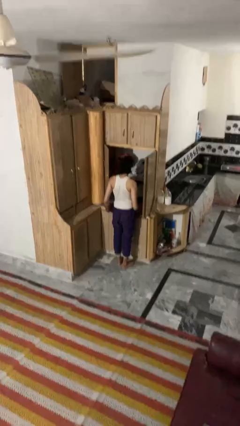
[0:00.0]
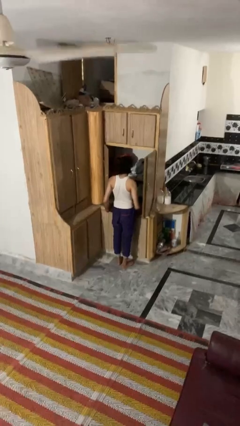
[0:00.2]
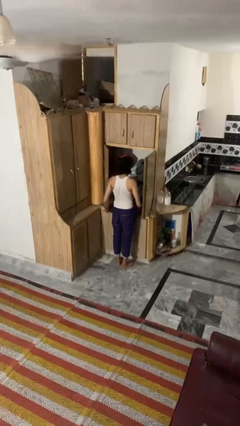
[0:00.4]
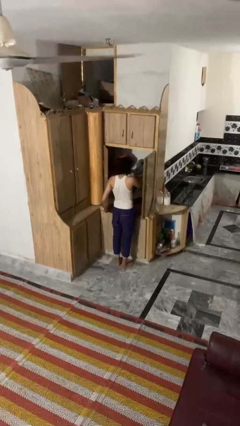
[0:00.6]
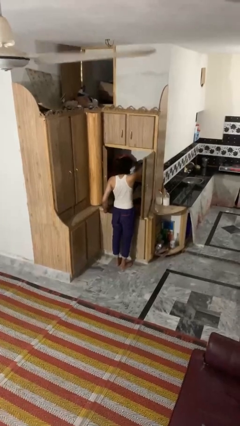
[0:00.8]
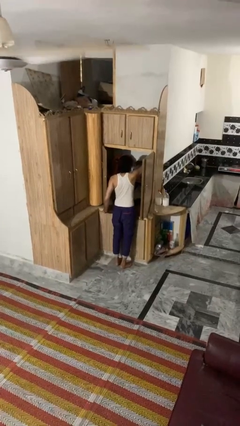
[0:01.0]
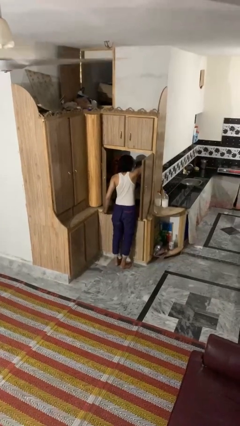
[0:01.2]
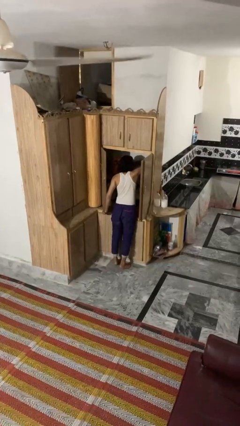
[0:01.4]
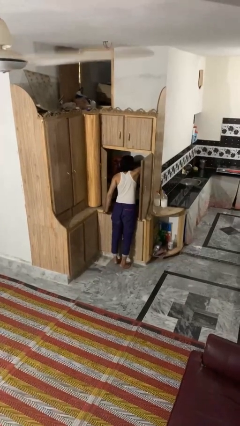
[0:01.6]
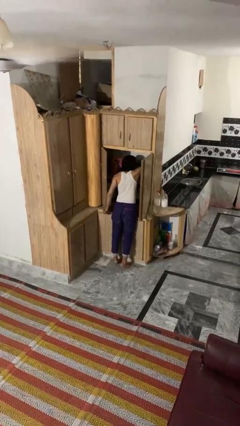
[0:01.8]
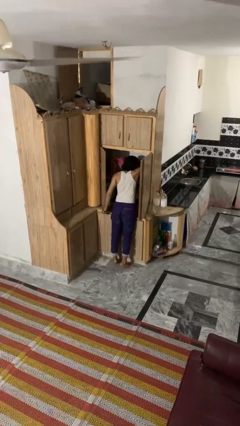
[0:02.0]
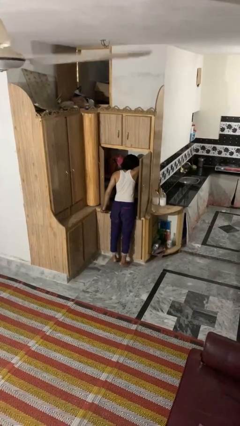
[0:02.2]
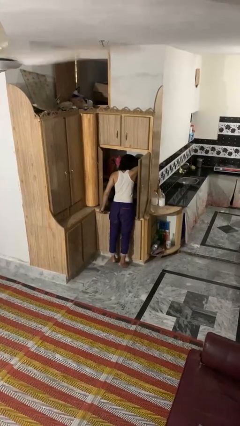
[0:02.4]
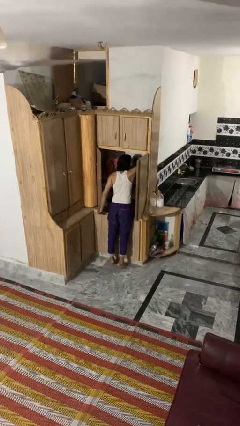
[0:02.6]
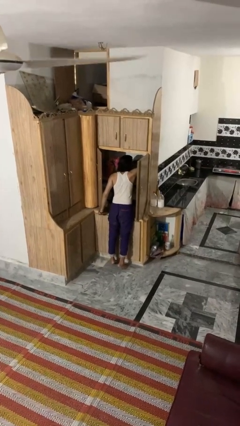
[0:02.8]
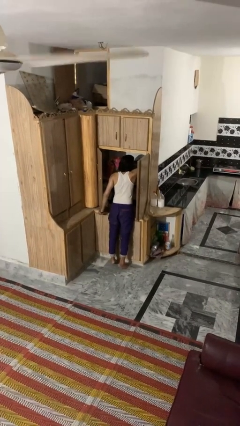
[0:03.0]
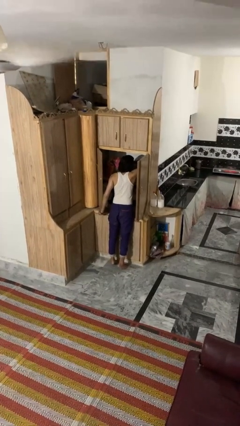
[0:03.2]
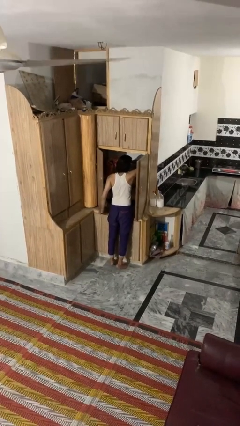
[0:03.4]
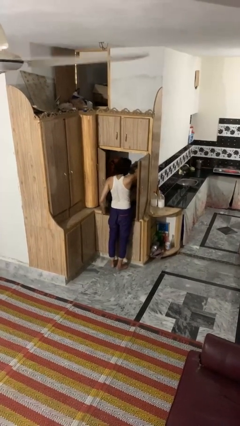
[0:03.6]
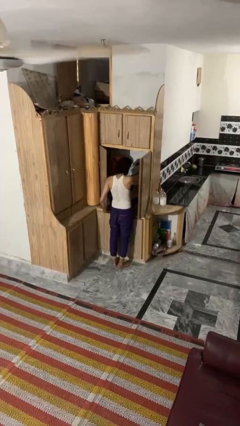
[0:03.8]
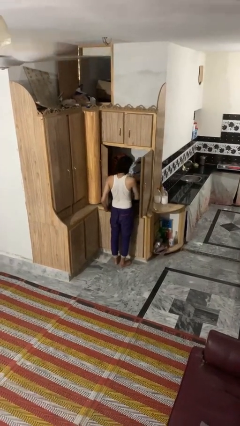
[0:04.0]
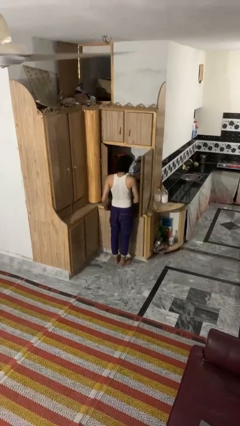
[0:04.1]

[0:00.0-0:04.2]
person searches in cabinet

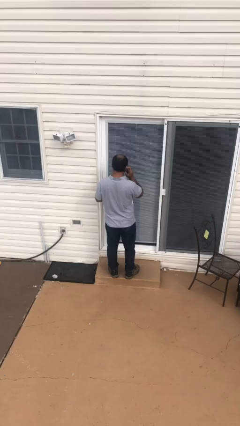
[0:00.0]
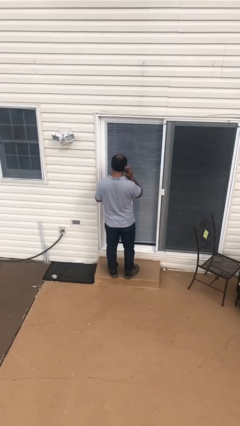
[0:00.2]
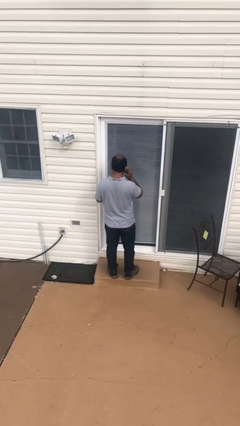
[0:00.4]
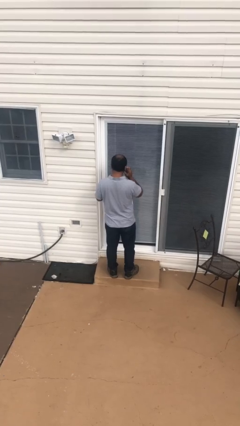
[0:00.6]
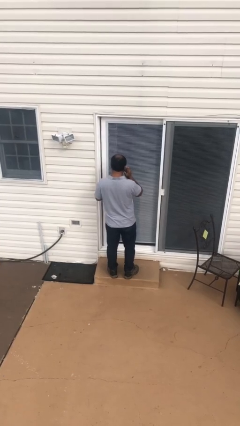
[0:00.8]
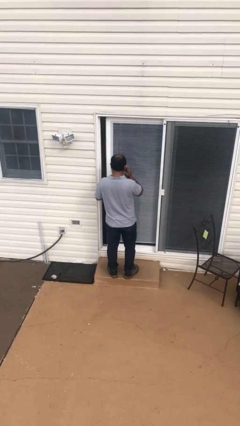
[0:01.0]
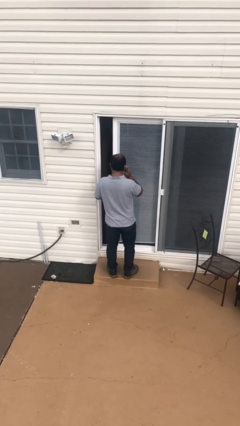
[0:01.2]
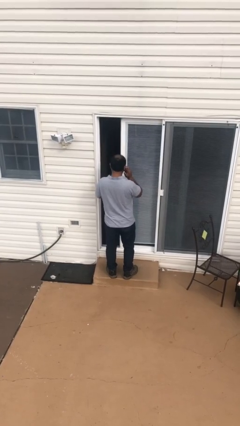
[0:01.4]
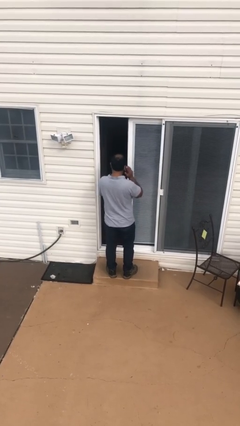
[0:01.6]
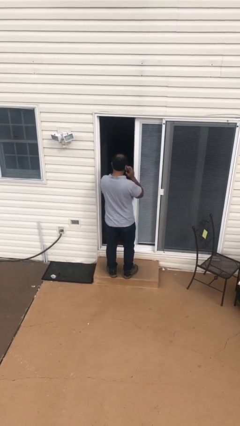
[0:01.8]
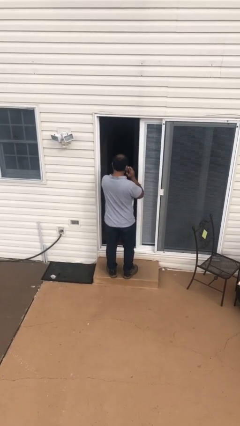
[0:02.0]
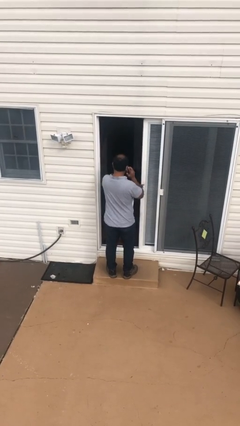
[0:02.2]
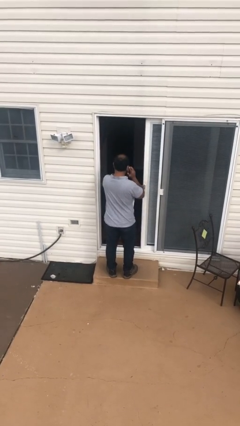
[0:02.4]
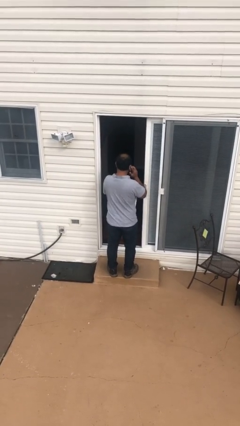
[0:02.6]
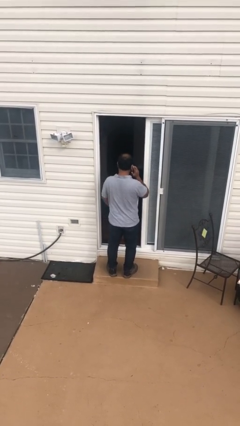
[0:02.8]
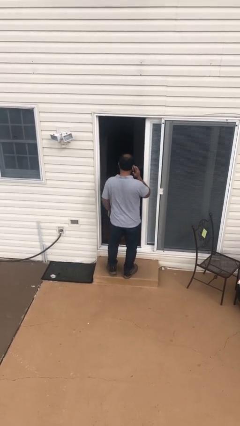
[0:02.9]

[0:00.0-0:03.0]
person opens facility door

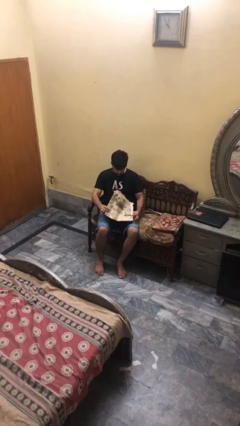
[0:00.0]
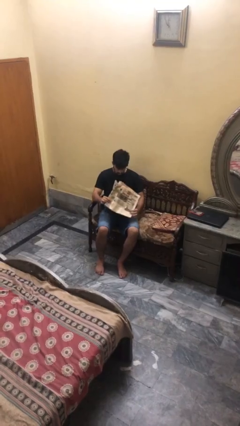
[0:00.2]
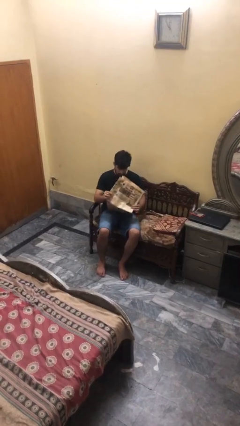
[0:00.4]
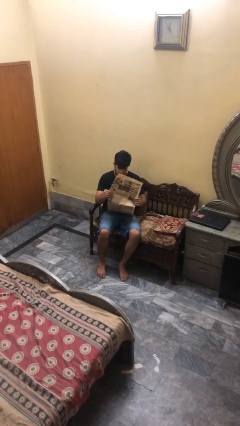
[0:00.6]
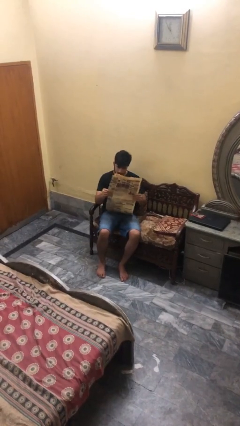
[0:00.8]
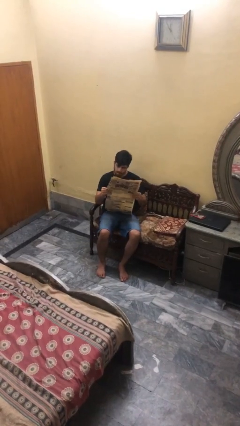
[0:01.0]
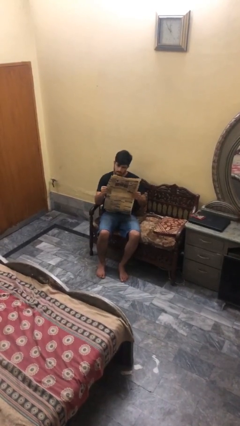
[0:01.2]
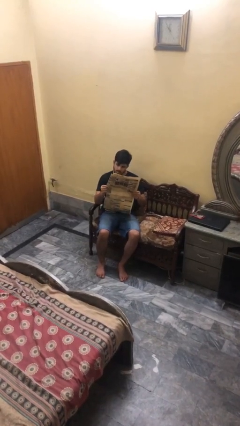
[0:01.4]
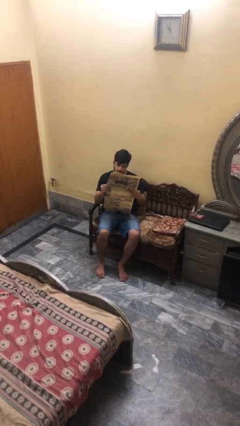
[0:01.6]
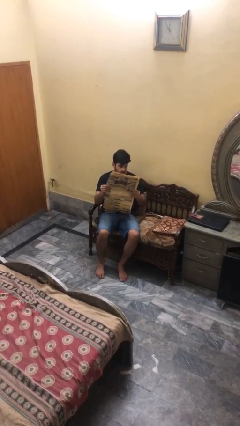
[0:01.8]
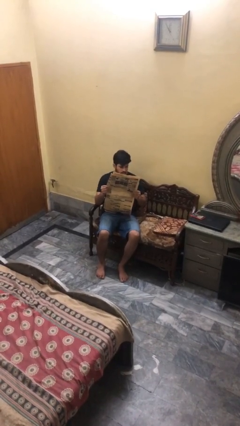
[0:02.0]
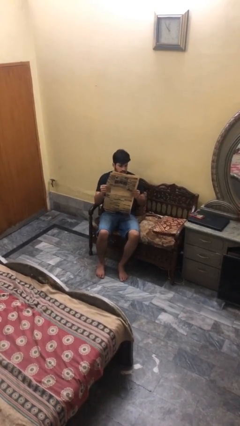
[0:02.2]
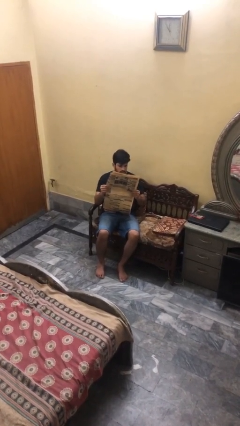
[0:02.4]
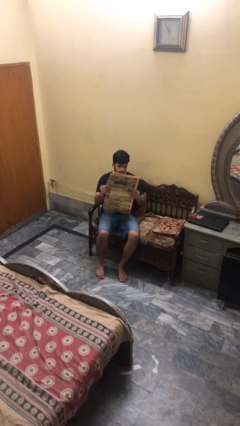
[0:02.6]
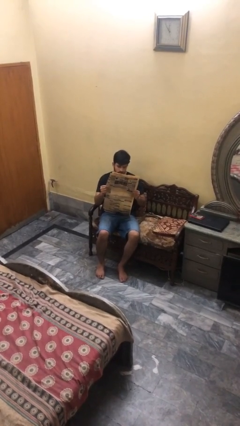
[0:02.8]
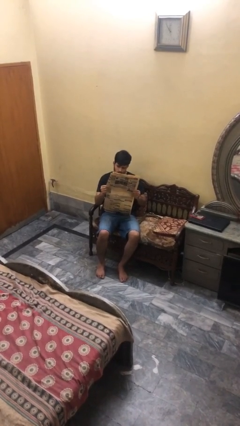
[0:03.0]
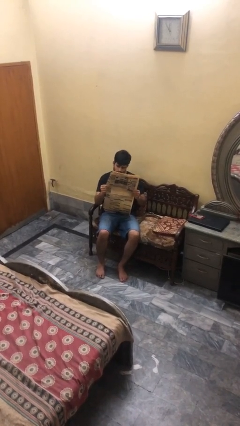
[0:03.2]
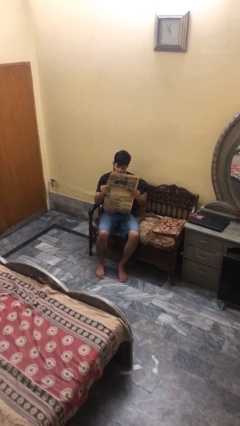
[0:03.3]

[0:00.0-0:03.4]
person reads newspaper

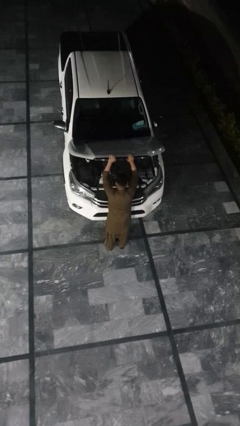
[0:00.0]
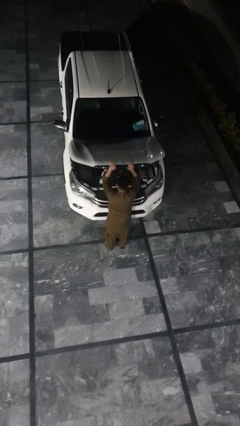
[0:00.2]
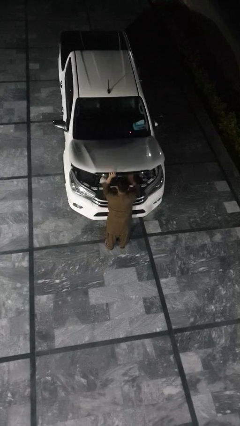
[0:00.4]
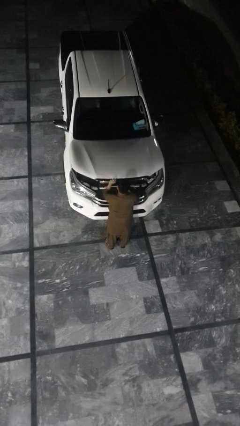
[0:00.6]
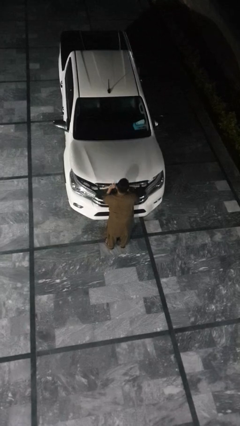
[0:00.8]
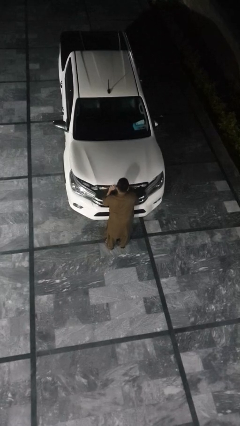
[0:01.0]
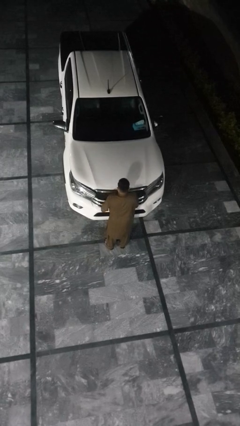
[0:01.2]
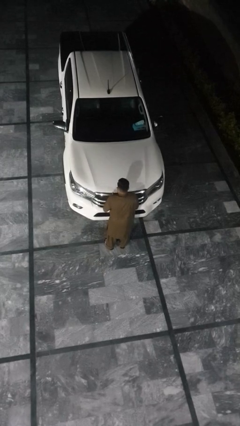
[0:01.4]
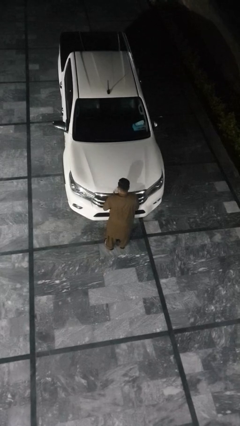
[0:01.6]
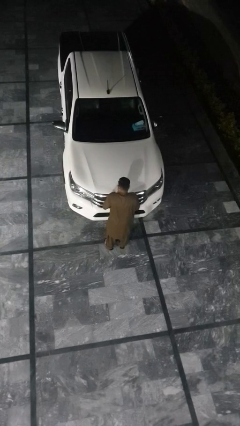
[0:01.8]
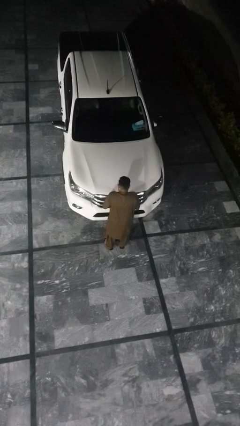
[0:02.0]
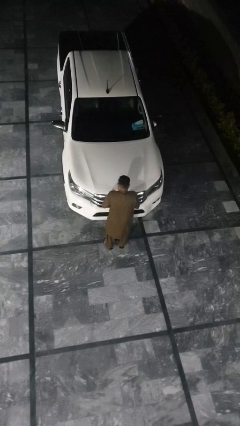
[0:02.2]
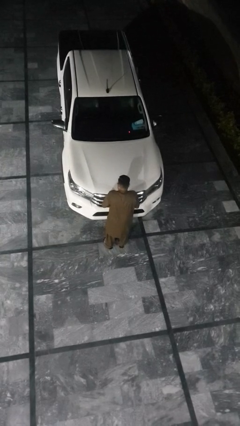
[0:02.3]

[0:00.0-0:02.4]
person closes car hood

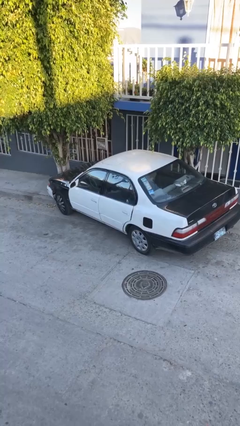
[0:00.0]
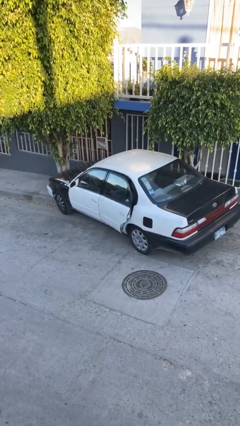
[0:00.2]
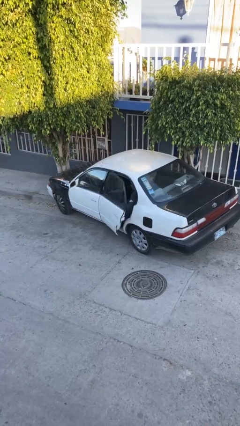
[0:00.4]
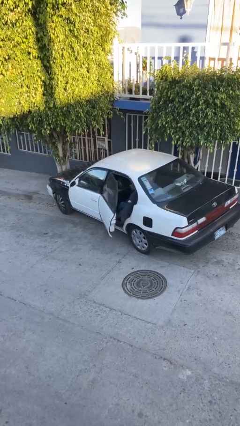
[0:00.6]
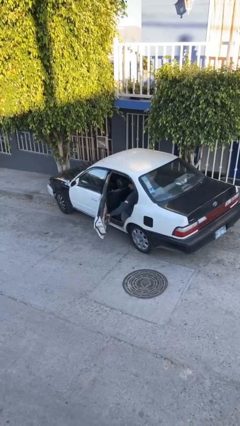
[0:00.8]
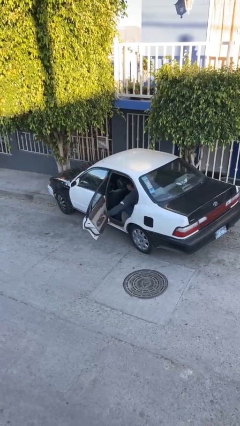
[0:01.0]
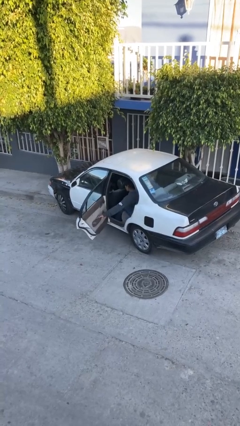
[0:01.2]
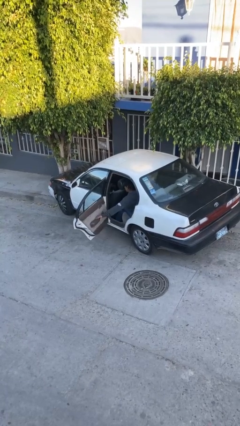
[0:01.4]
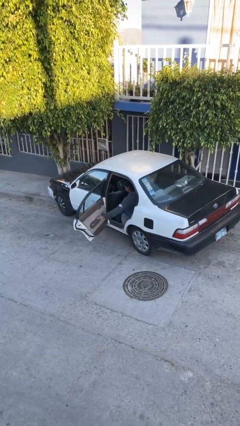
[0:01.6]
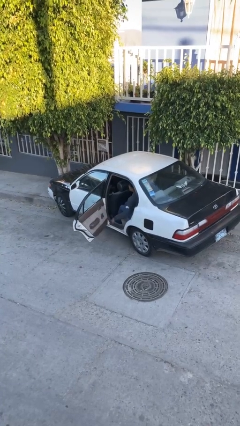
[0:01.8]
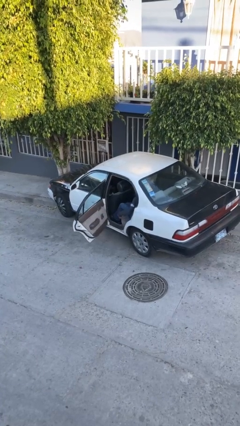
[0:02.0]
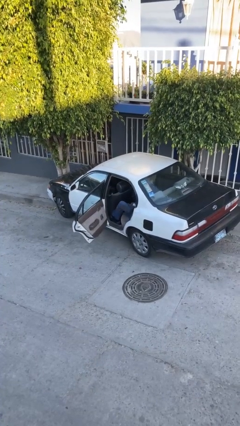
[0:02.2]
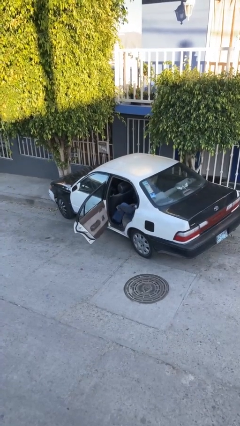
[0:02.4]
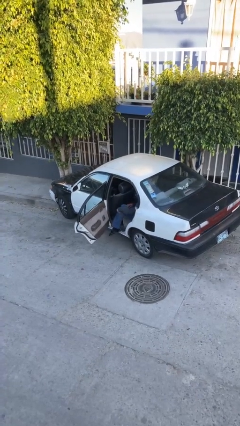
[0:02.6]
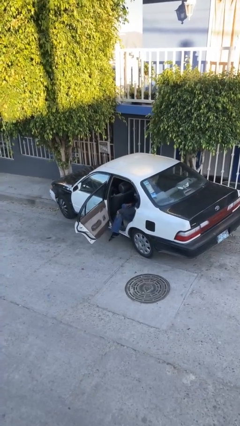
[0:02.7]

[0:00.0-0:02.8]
person opens car door

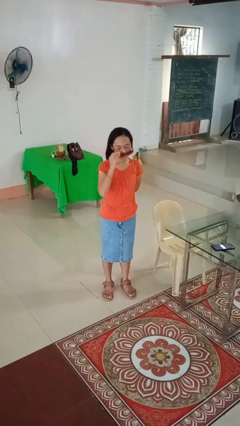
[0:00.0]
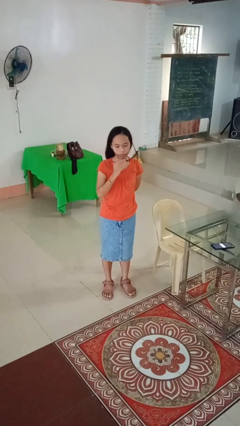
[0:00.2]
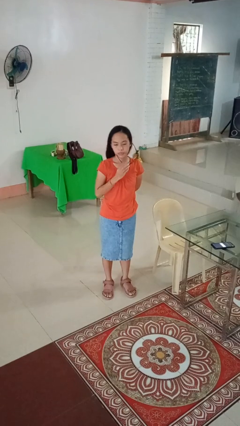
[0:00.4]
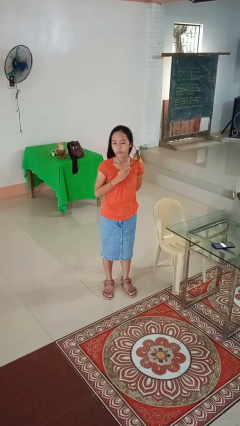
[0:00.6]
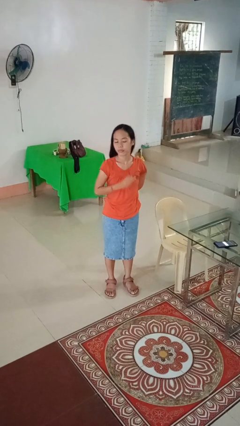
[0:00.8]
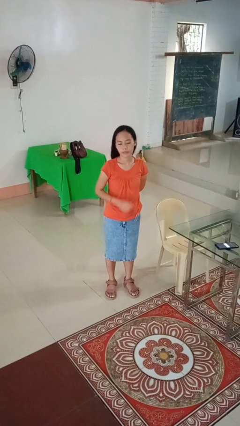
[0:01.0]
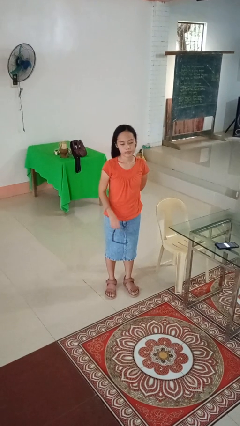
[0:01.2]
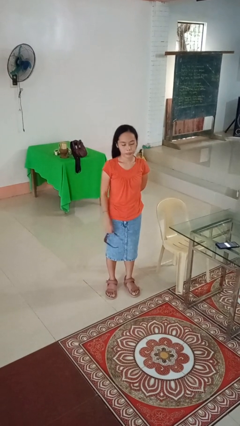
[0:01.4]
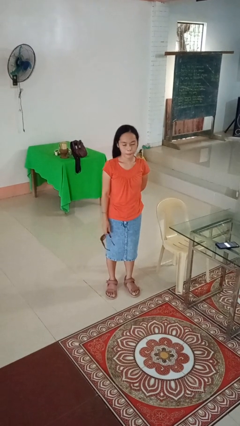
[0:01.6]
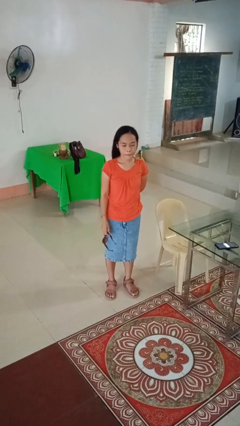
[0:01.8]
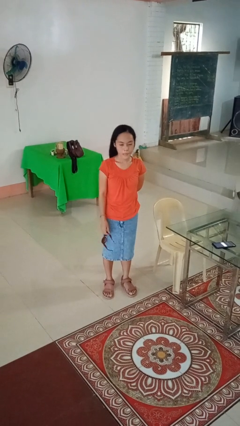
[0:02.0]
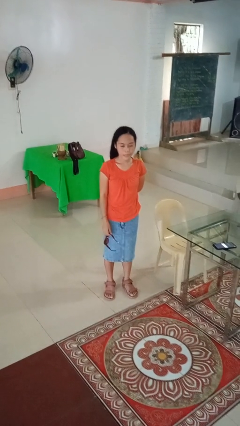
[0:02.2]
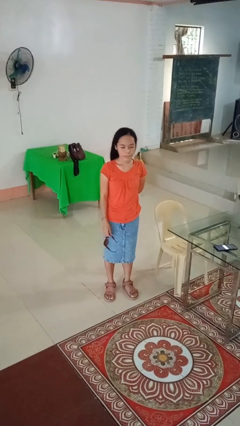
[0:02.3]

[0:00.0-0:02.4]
person takes off sunglasses
